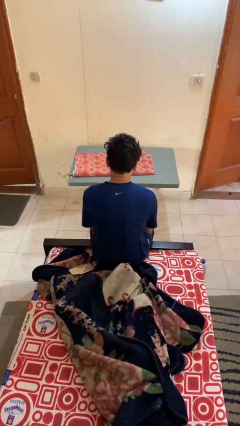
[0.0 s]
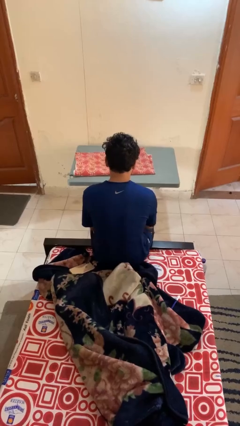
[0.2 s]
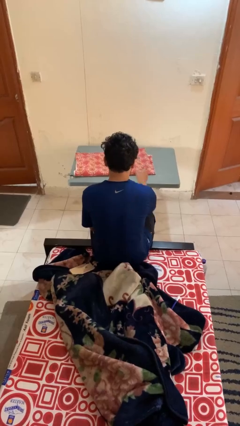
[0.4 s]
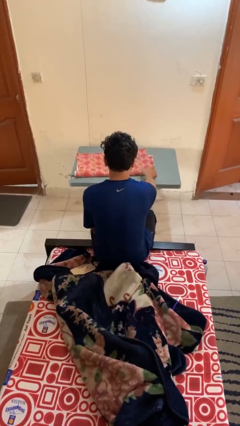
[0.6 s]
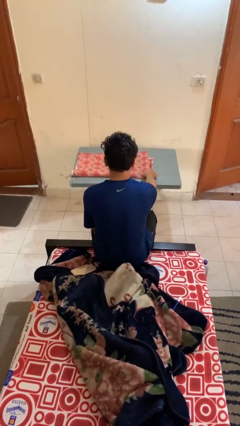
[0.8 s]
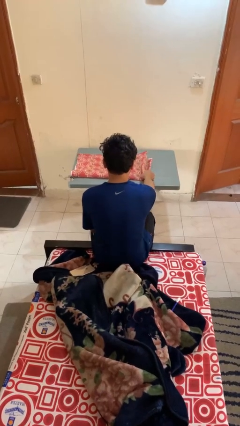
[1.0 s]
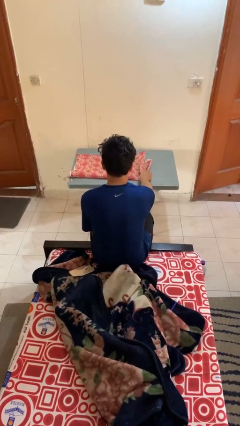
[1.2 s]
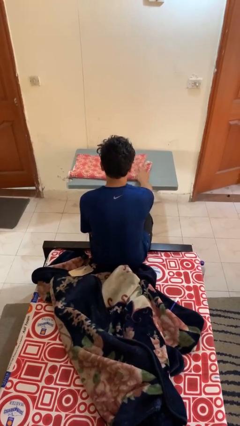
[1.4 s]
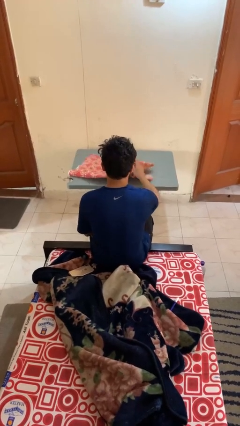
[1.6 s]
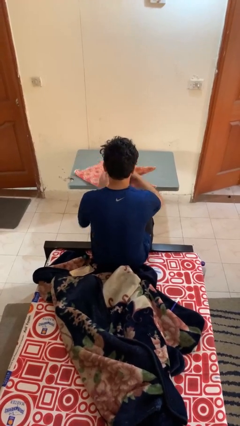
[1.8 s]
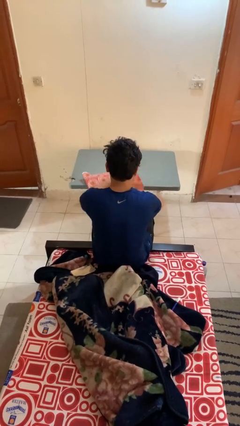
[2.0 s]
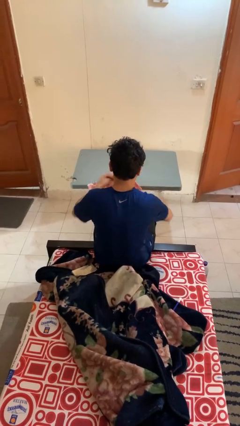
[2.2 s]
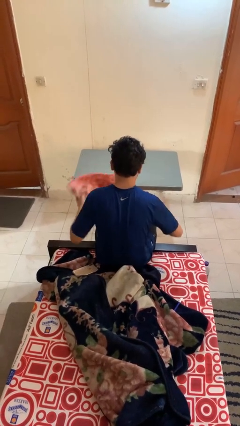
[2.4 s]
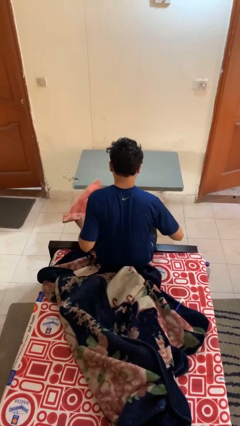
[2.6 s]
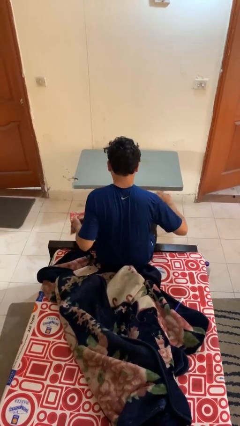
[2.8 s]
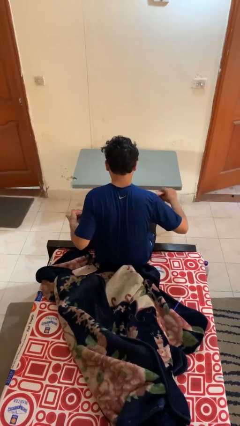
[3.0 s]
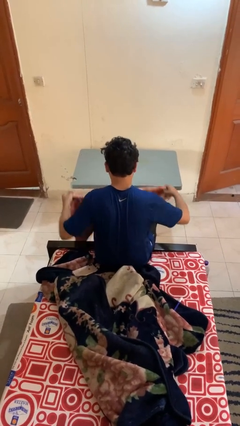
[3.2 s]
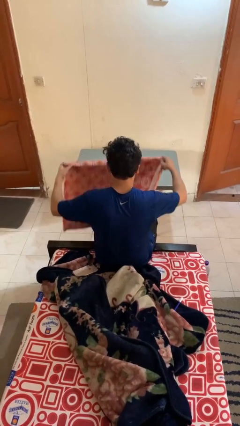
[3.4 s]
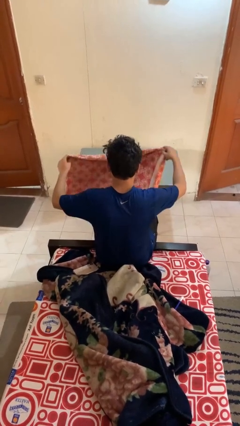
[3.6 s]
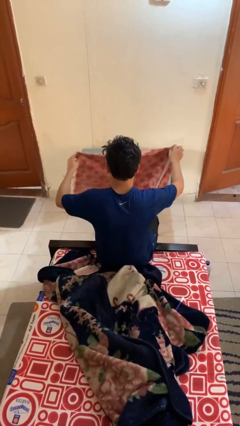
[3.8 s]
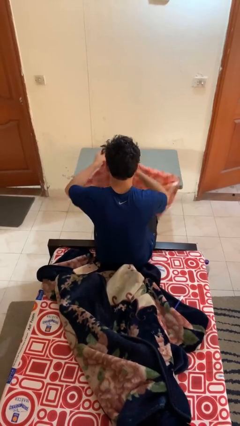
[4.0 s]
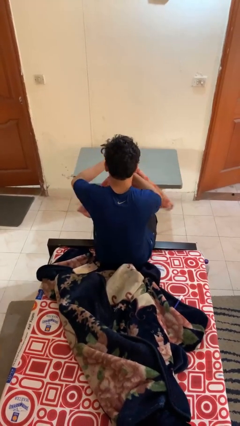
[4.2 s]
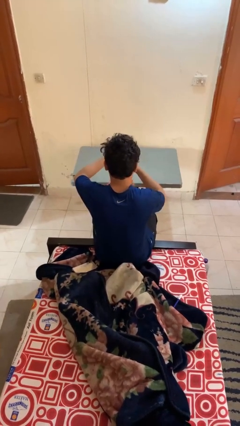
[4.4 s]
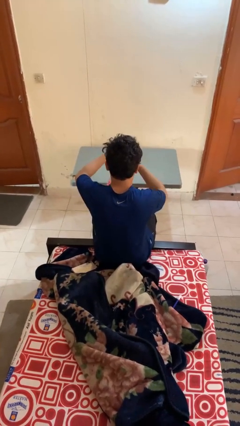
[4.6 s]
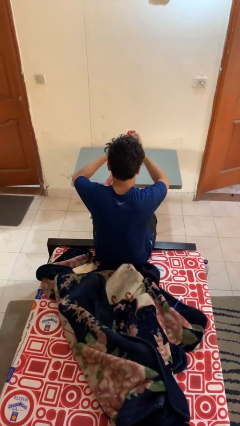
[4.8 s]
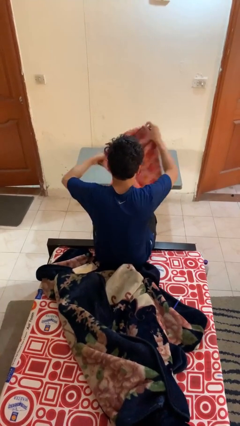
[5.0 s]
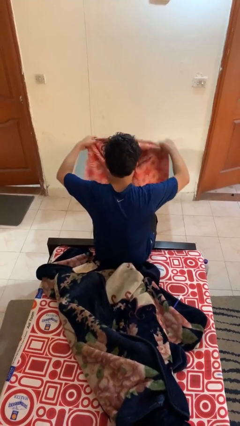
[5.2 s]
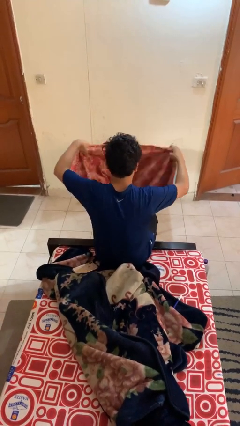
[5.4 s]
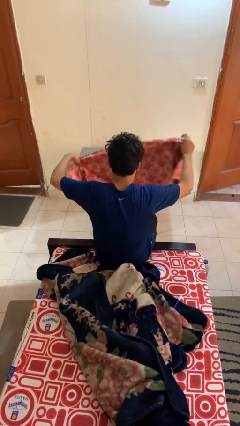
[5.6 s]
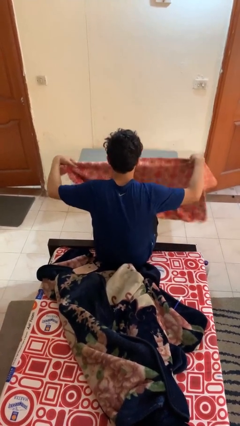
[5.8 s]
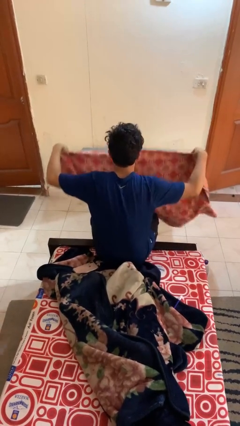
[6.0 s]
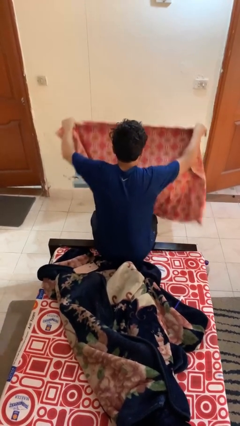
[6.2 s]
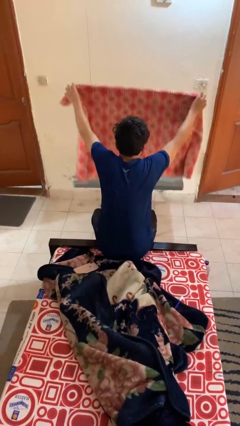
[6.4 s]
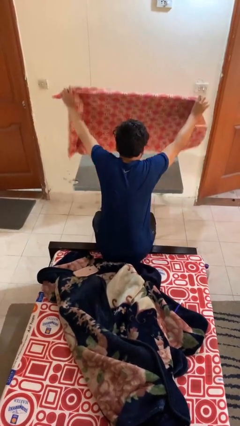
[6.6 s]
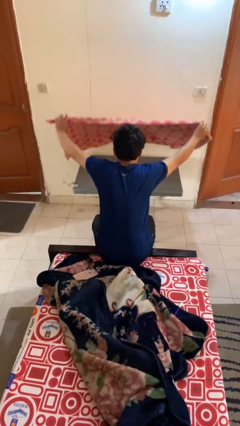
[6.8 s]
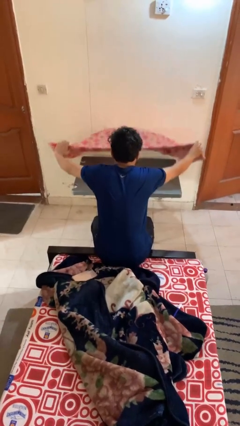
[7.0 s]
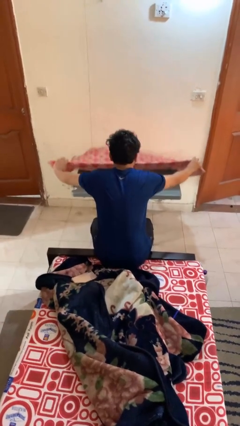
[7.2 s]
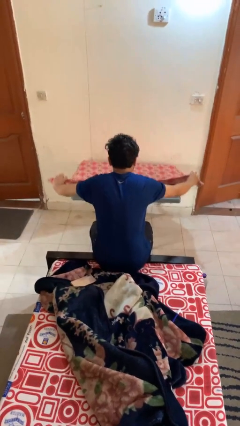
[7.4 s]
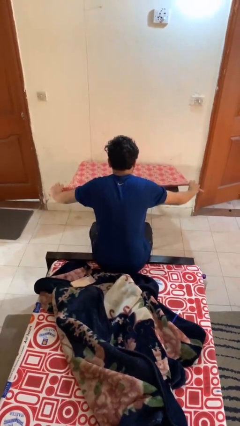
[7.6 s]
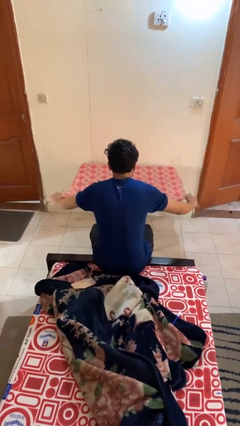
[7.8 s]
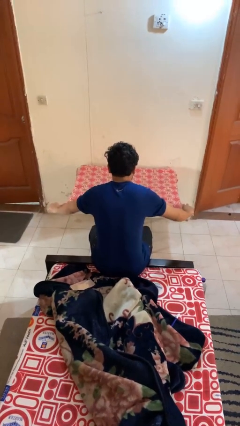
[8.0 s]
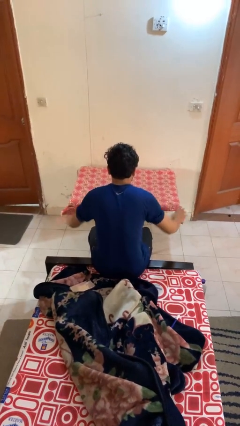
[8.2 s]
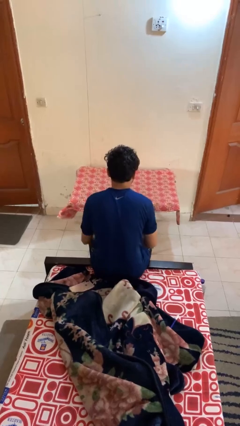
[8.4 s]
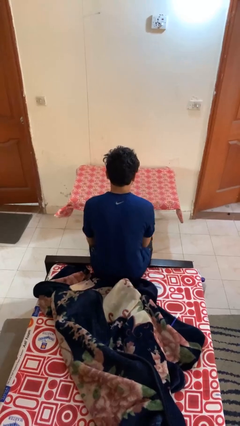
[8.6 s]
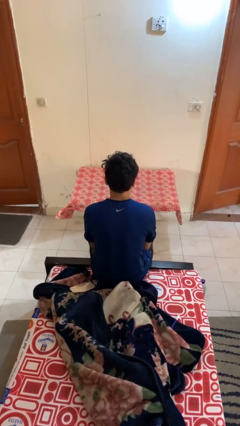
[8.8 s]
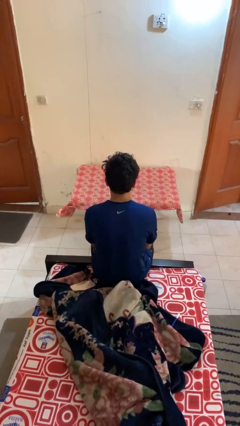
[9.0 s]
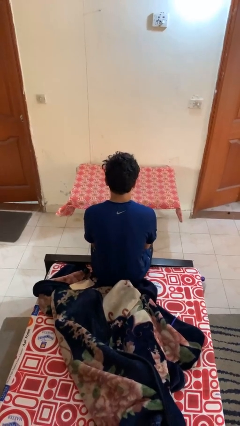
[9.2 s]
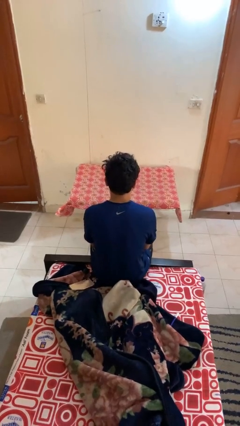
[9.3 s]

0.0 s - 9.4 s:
person spreads tablecloth

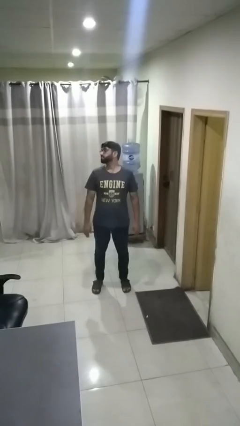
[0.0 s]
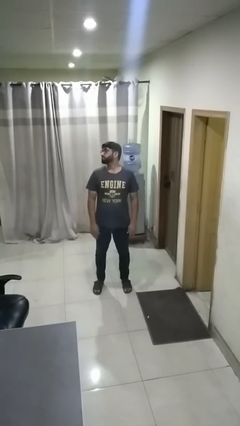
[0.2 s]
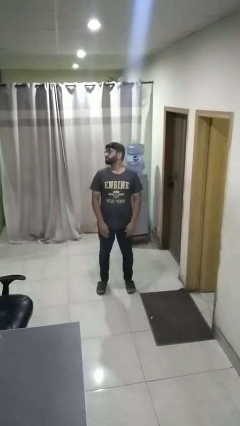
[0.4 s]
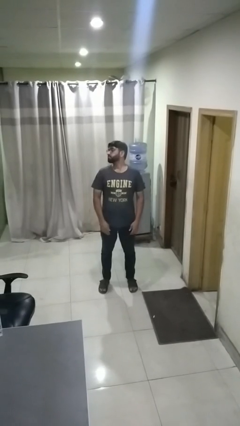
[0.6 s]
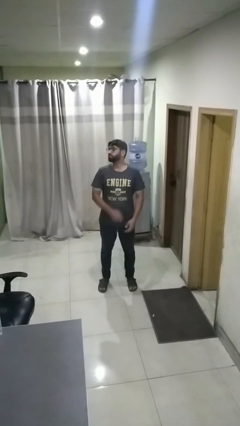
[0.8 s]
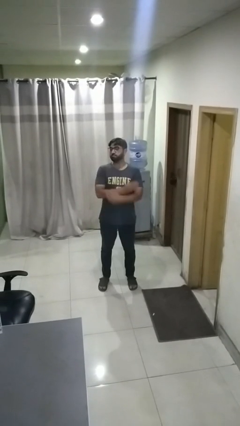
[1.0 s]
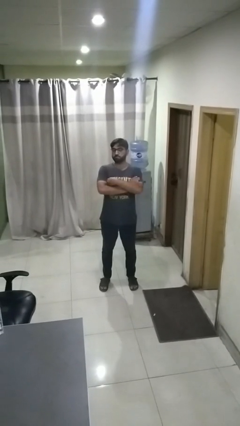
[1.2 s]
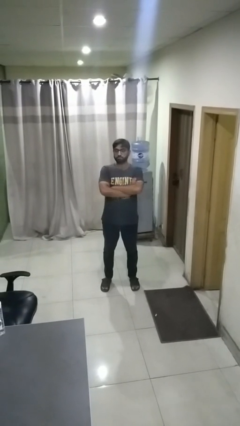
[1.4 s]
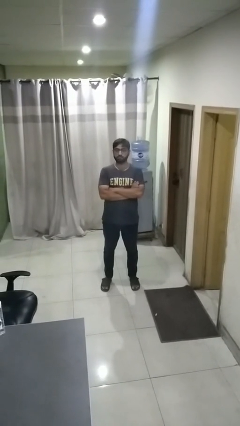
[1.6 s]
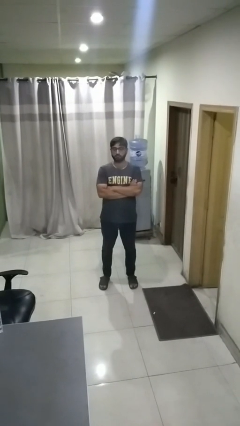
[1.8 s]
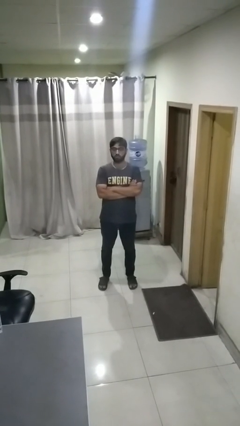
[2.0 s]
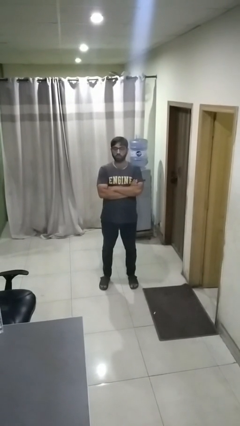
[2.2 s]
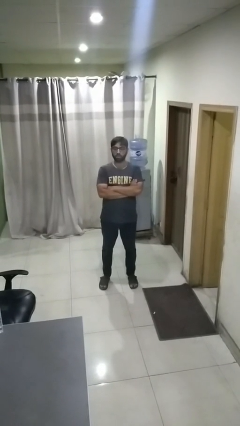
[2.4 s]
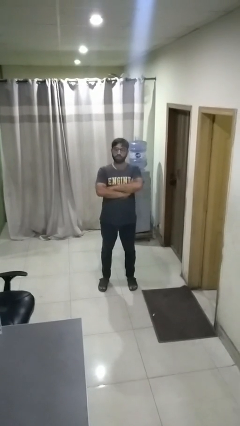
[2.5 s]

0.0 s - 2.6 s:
person crosses arms

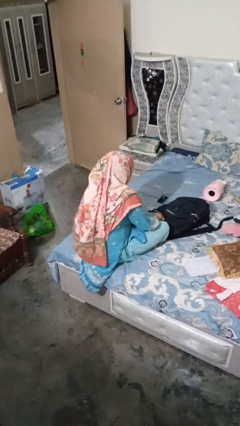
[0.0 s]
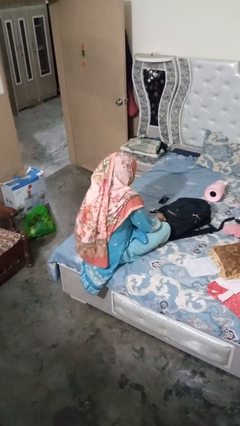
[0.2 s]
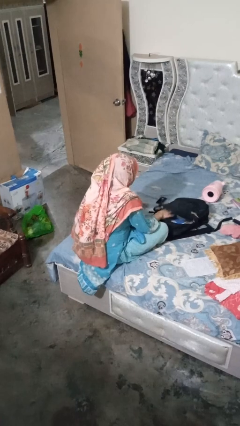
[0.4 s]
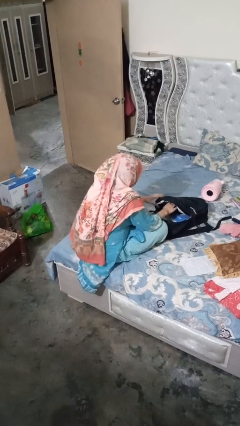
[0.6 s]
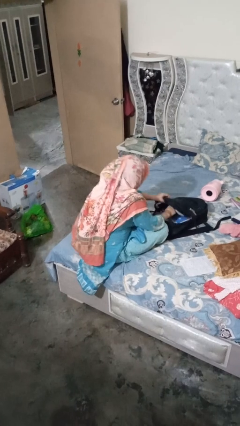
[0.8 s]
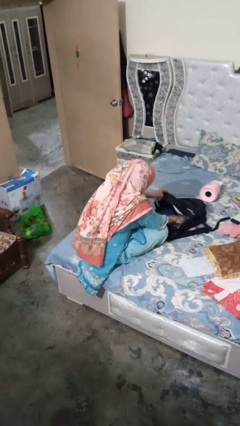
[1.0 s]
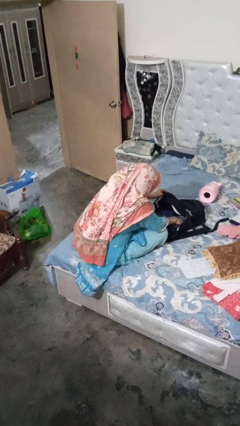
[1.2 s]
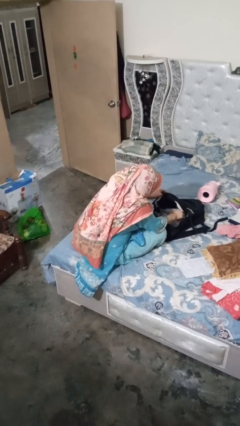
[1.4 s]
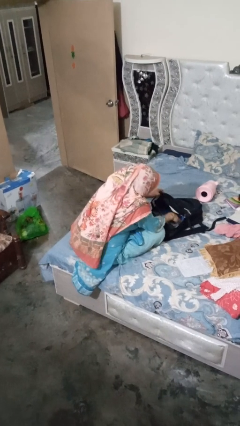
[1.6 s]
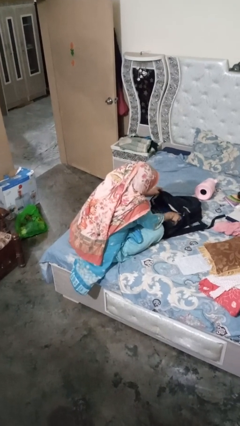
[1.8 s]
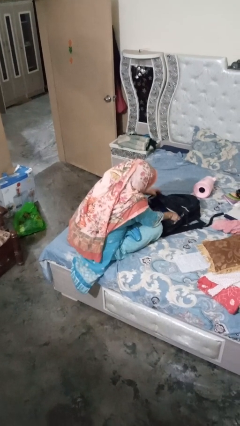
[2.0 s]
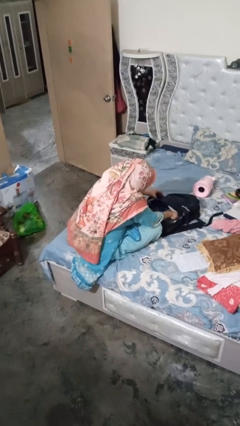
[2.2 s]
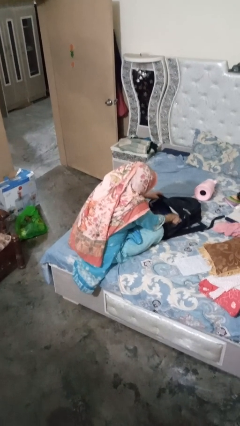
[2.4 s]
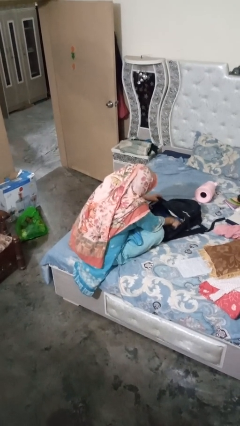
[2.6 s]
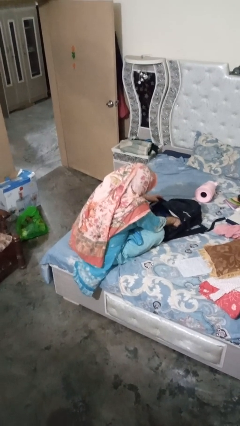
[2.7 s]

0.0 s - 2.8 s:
person searches in bag

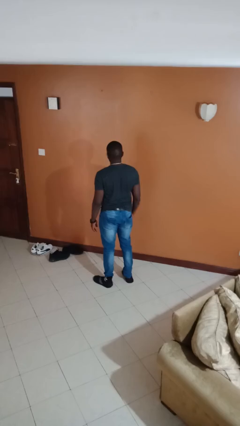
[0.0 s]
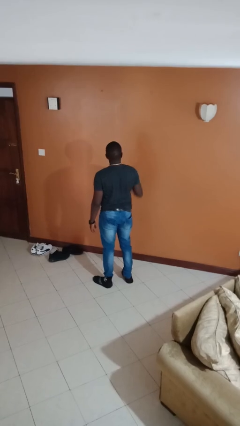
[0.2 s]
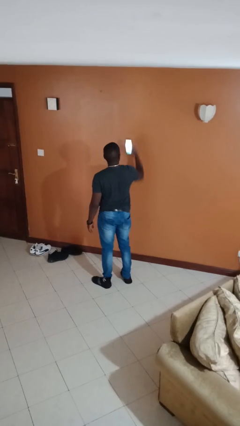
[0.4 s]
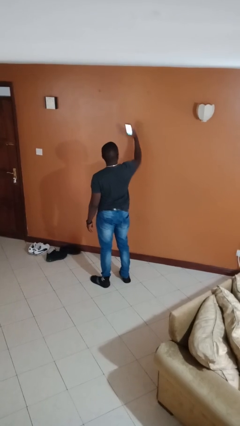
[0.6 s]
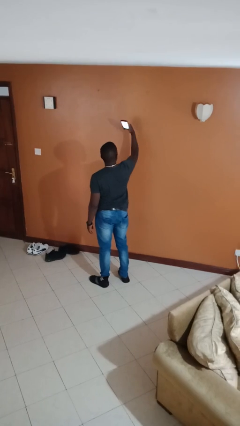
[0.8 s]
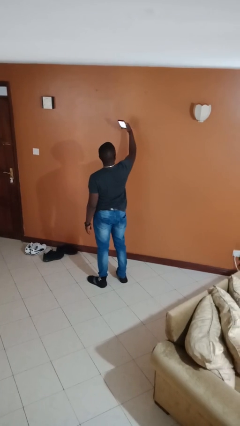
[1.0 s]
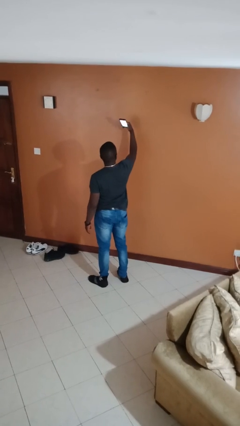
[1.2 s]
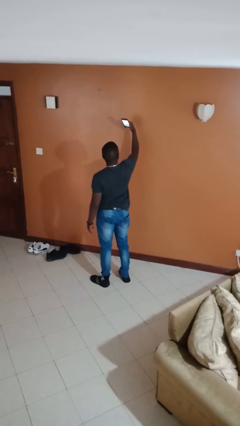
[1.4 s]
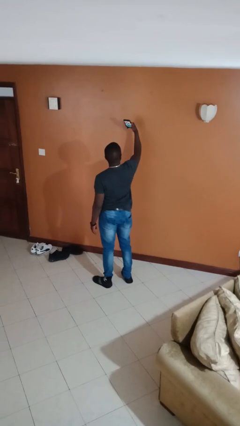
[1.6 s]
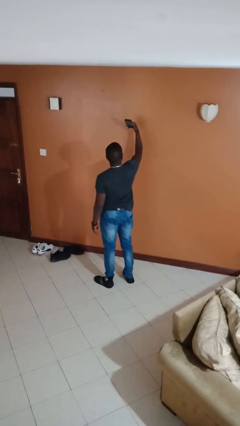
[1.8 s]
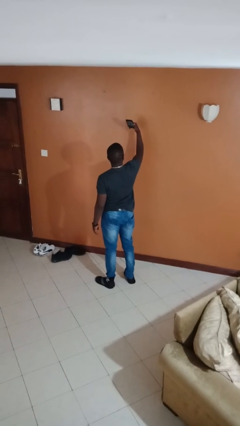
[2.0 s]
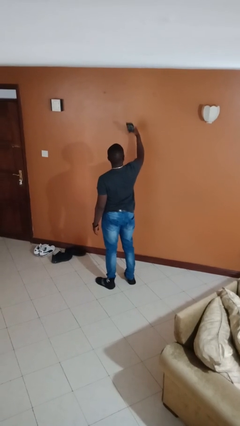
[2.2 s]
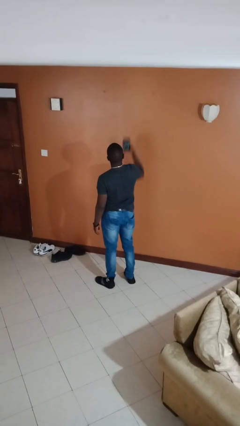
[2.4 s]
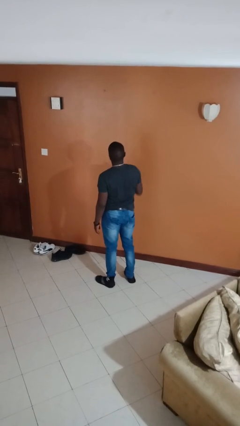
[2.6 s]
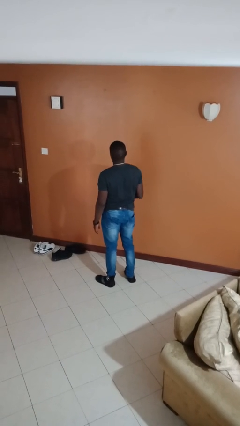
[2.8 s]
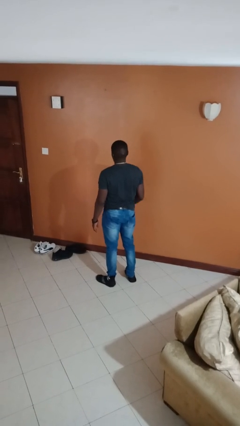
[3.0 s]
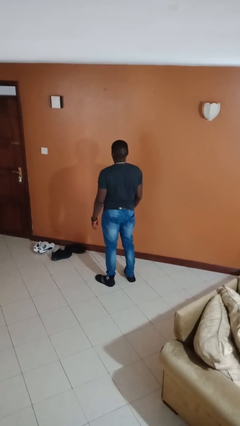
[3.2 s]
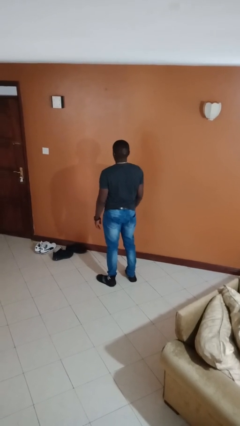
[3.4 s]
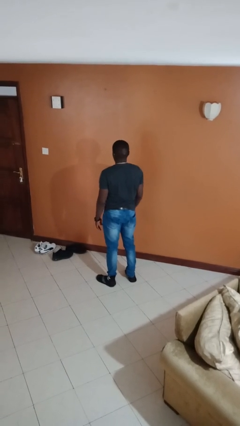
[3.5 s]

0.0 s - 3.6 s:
person takes selfie
